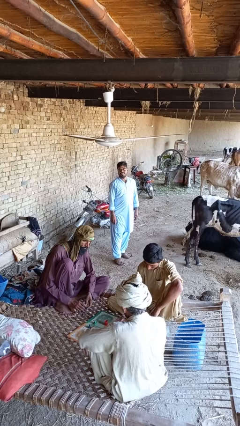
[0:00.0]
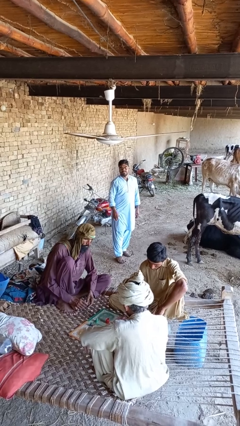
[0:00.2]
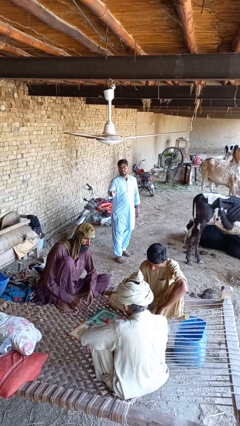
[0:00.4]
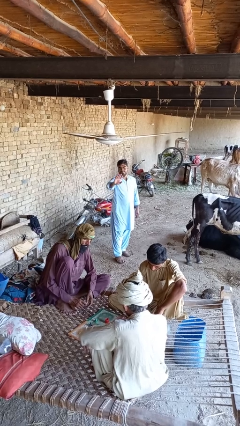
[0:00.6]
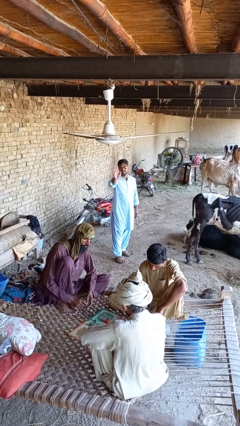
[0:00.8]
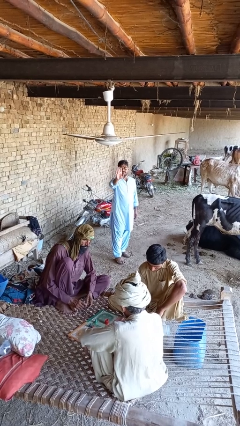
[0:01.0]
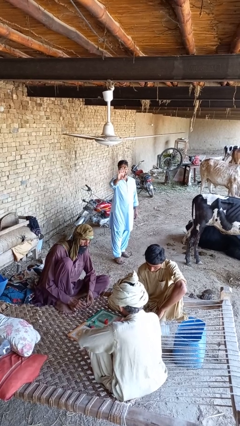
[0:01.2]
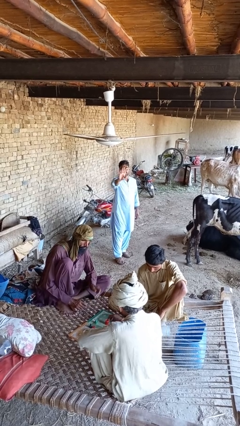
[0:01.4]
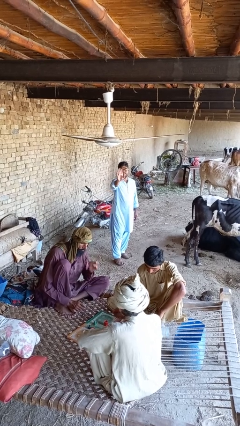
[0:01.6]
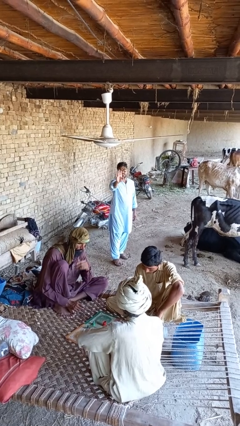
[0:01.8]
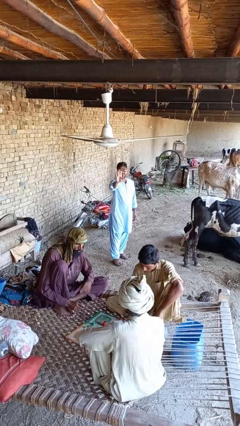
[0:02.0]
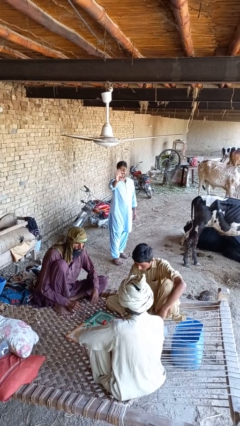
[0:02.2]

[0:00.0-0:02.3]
person waves at person

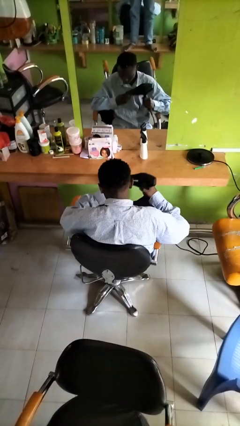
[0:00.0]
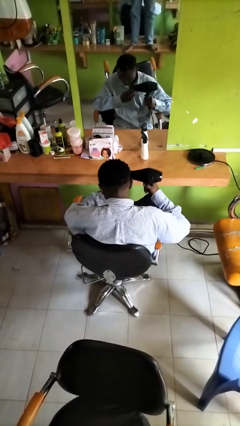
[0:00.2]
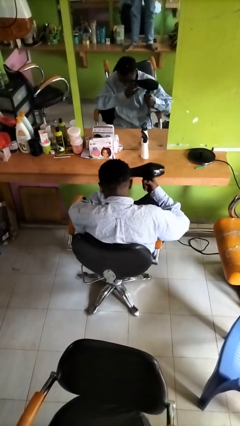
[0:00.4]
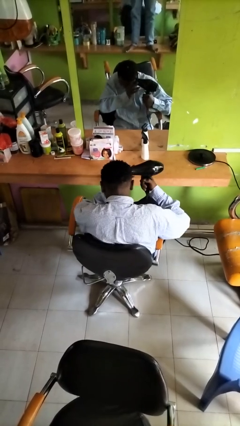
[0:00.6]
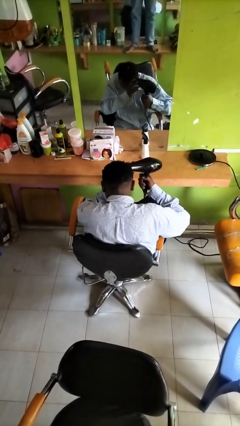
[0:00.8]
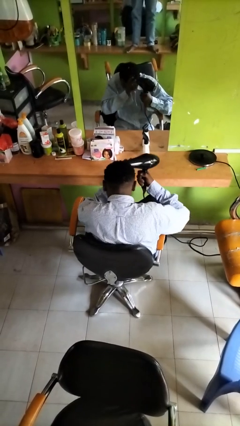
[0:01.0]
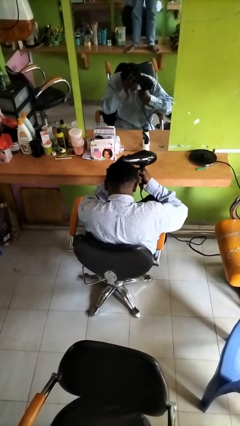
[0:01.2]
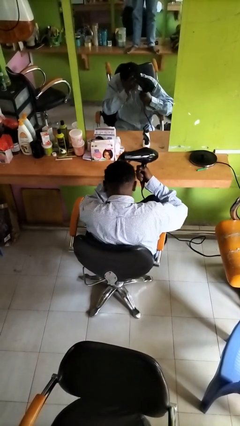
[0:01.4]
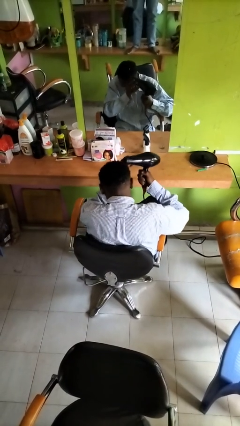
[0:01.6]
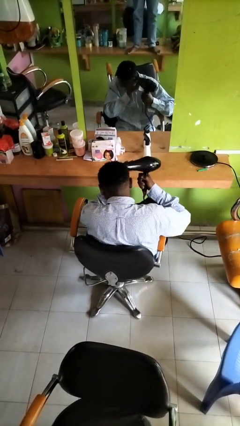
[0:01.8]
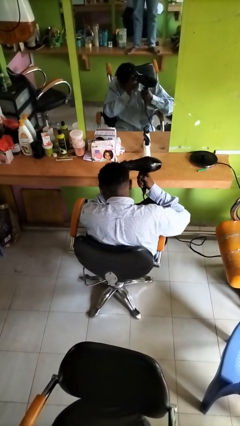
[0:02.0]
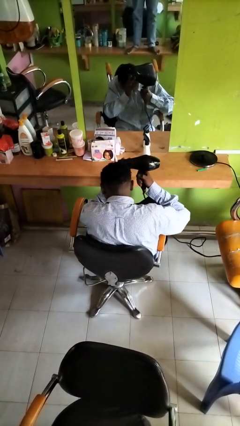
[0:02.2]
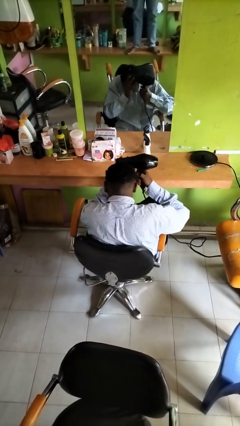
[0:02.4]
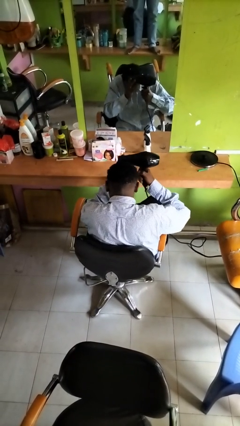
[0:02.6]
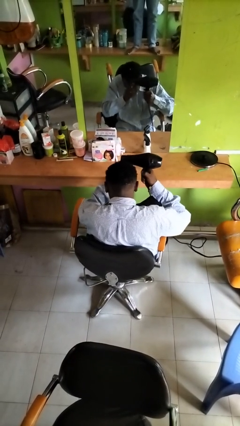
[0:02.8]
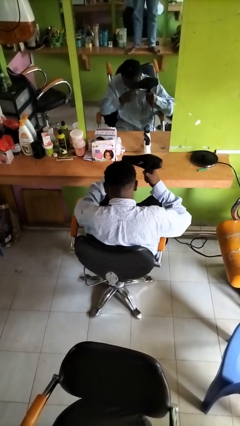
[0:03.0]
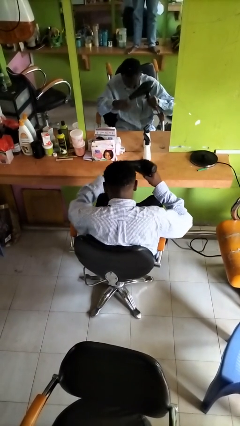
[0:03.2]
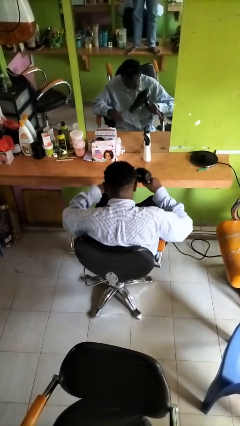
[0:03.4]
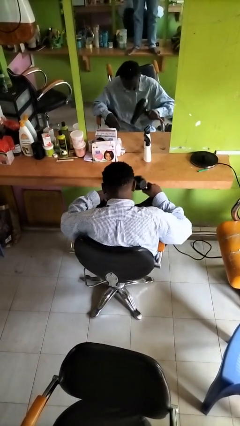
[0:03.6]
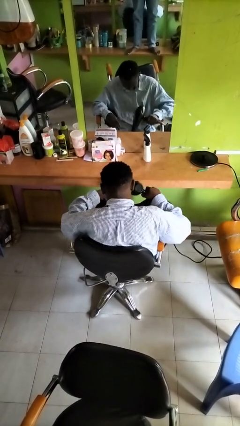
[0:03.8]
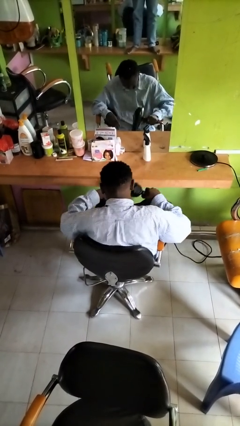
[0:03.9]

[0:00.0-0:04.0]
person dries hair with hairdryer

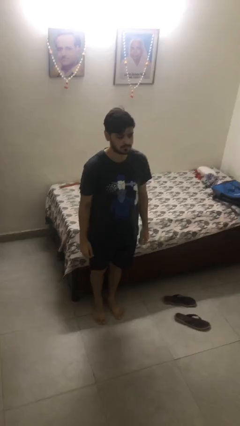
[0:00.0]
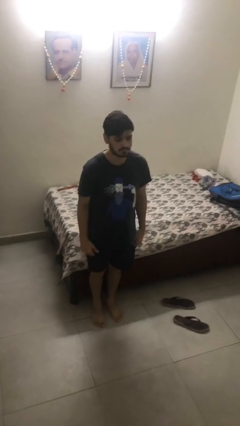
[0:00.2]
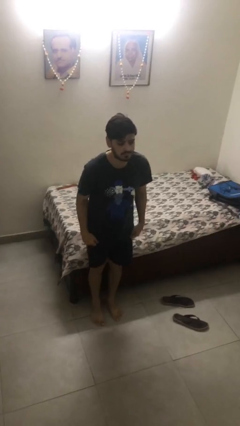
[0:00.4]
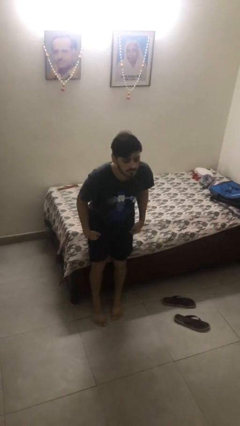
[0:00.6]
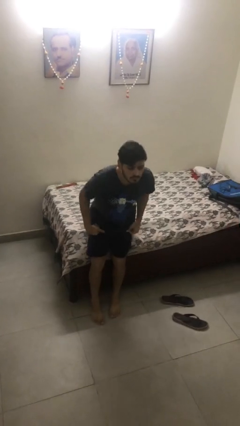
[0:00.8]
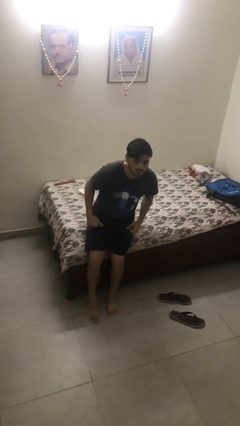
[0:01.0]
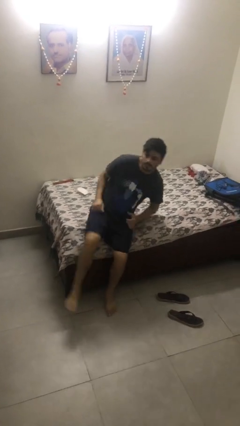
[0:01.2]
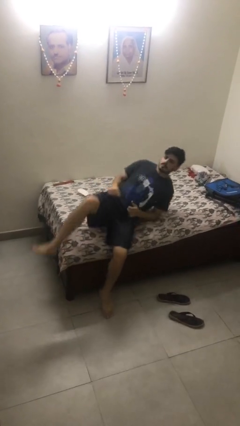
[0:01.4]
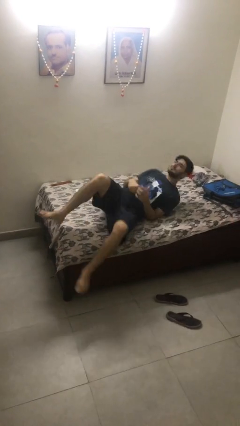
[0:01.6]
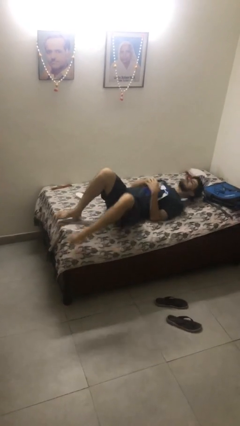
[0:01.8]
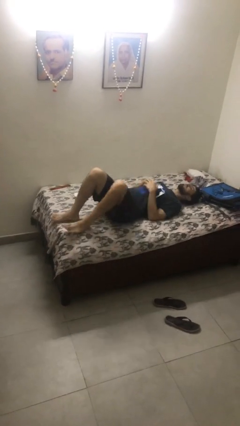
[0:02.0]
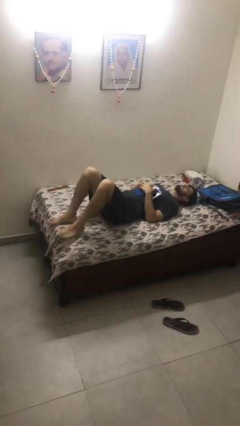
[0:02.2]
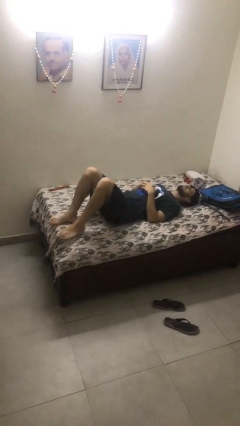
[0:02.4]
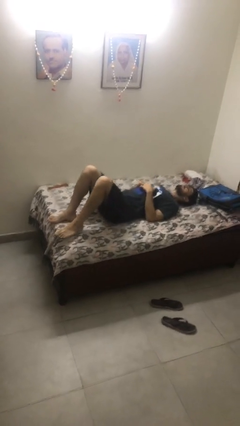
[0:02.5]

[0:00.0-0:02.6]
person lies down on bed

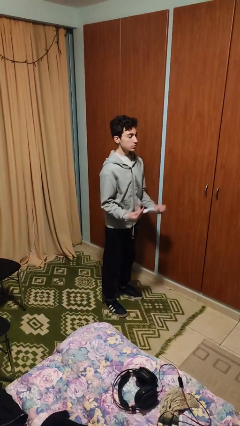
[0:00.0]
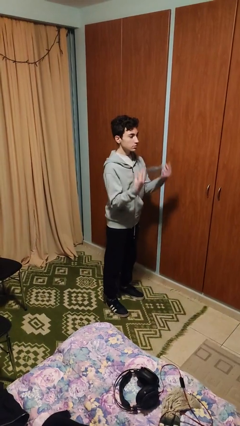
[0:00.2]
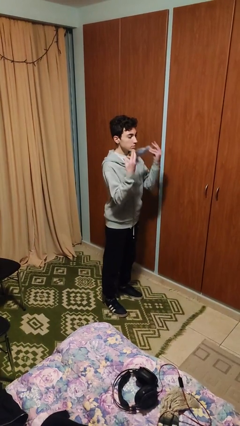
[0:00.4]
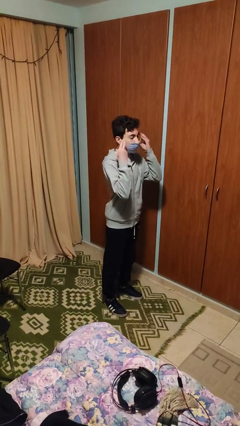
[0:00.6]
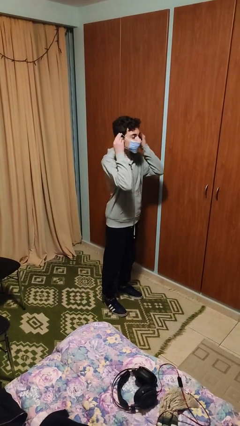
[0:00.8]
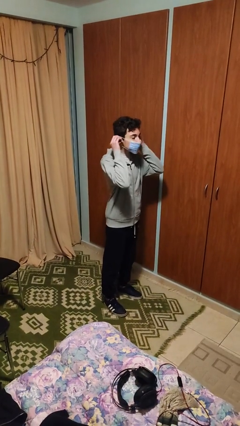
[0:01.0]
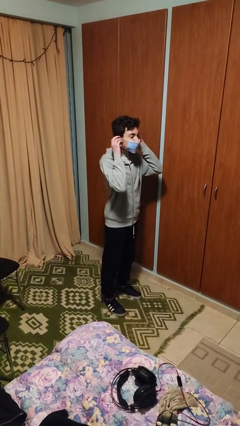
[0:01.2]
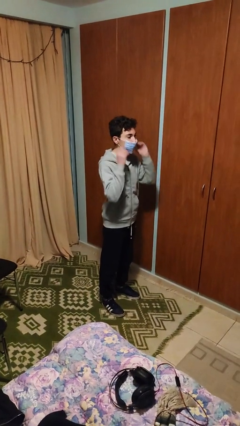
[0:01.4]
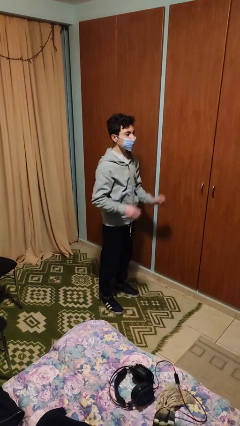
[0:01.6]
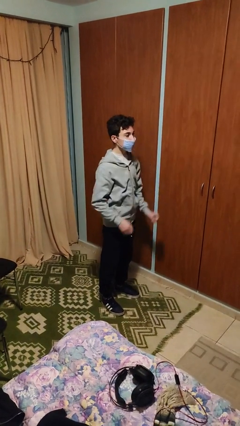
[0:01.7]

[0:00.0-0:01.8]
person puts on facemask

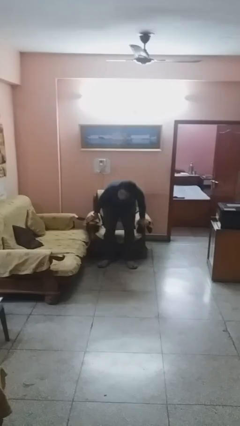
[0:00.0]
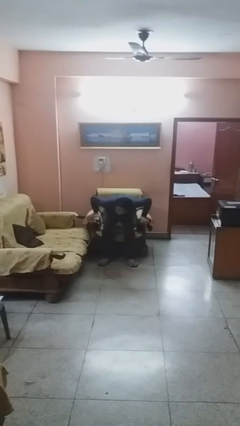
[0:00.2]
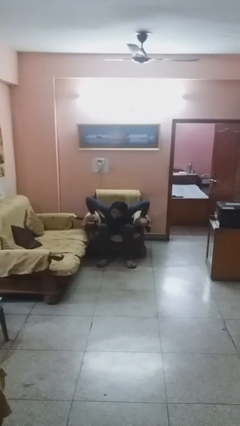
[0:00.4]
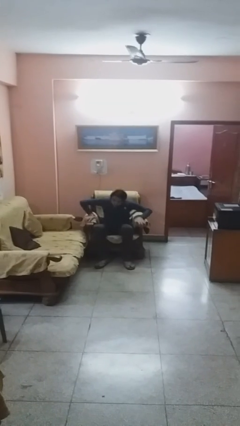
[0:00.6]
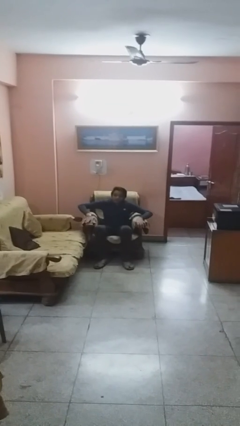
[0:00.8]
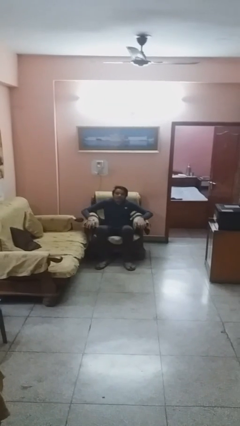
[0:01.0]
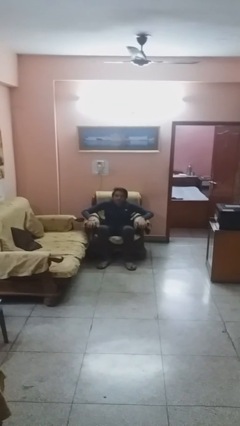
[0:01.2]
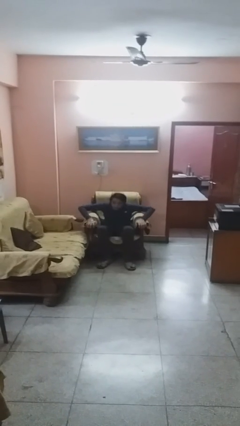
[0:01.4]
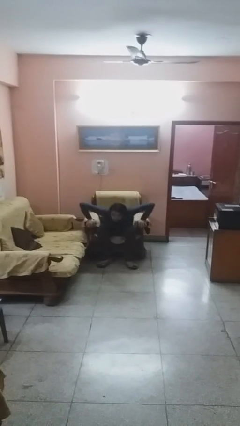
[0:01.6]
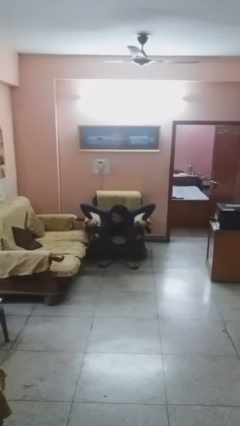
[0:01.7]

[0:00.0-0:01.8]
person sits down

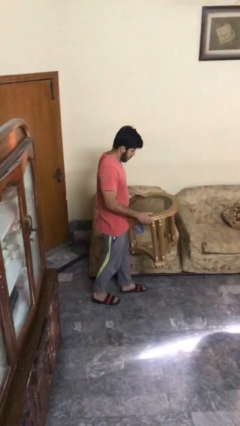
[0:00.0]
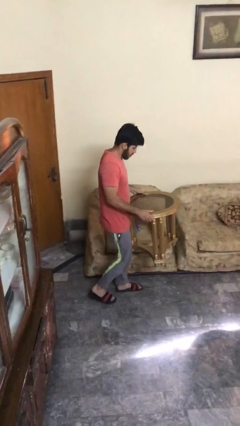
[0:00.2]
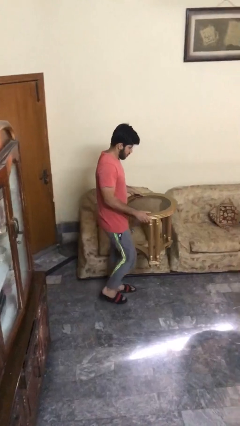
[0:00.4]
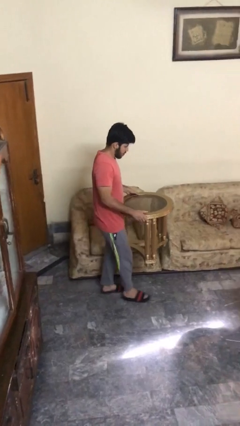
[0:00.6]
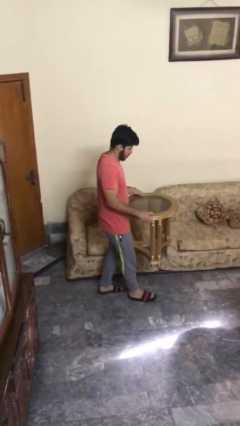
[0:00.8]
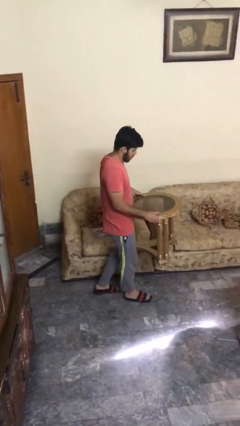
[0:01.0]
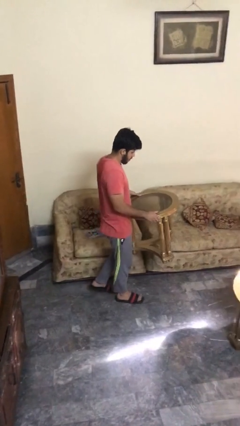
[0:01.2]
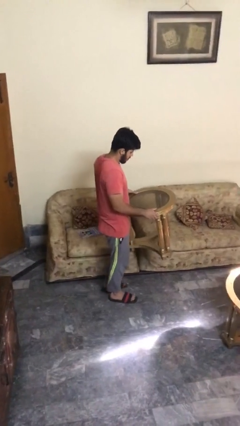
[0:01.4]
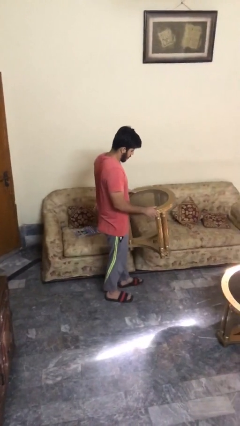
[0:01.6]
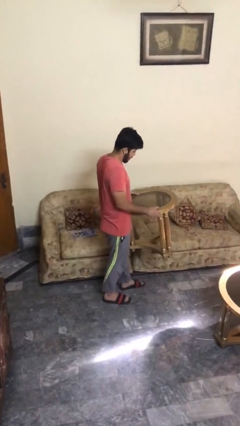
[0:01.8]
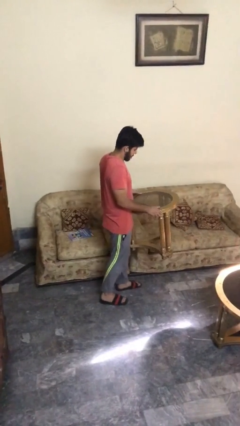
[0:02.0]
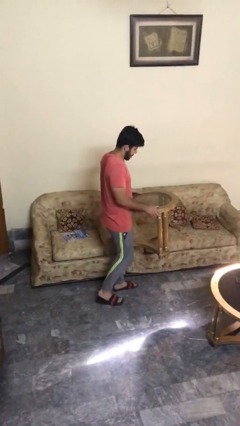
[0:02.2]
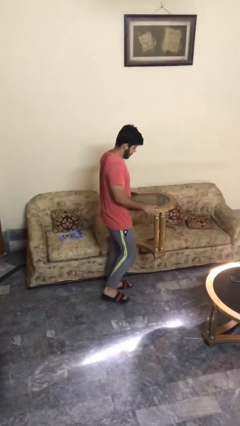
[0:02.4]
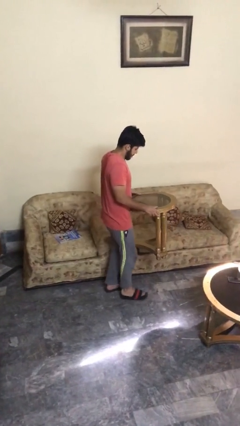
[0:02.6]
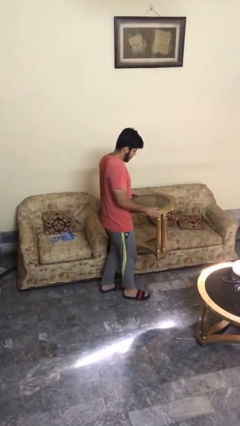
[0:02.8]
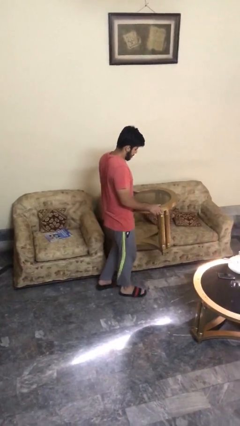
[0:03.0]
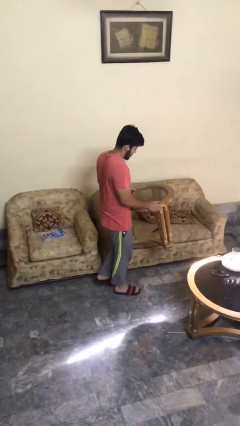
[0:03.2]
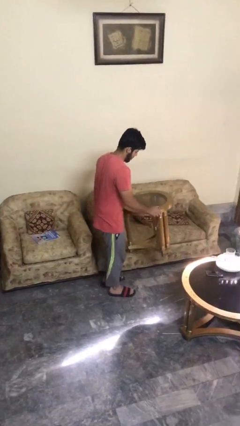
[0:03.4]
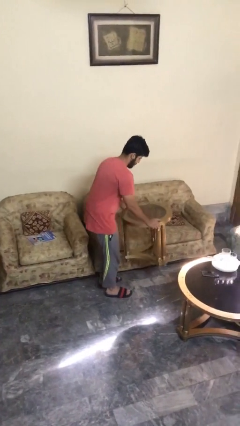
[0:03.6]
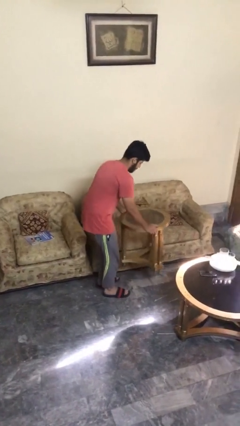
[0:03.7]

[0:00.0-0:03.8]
person carries heavy object

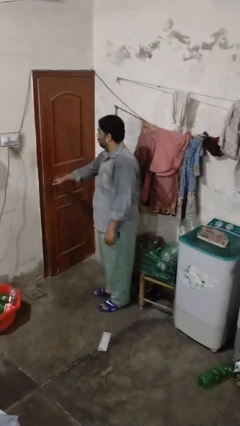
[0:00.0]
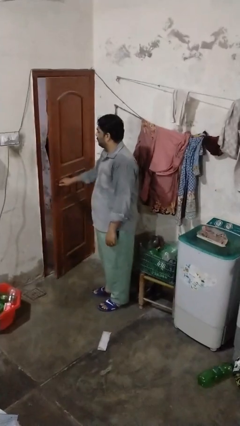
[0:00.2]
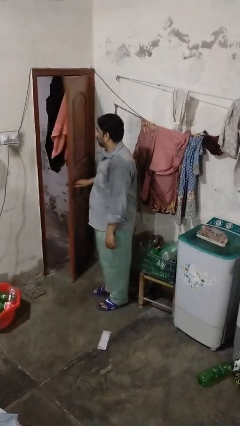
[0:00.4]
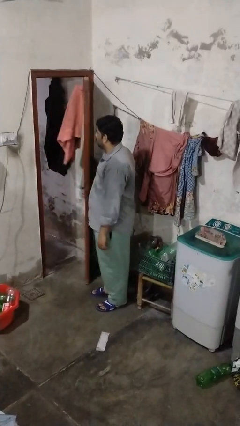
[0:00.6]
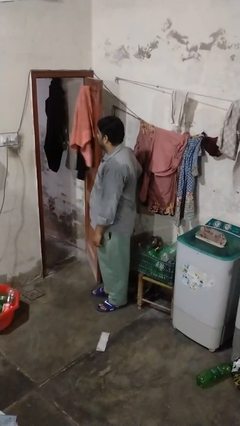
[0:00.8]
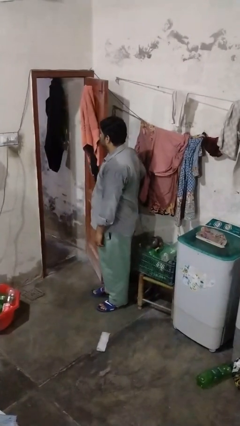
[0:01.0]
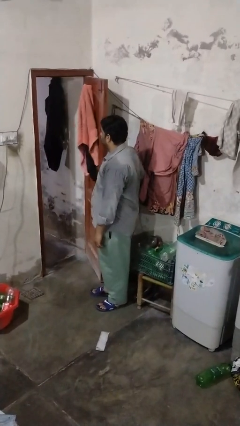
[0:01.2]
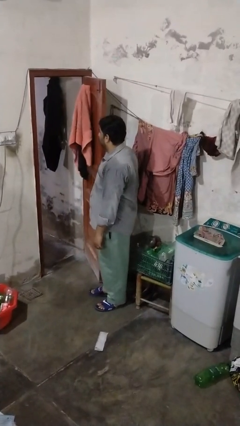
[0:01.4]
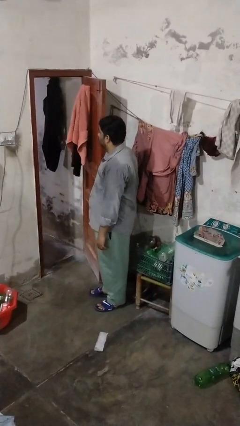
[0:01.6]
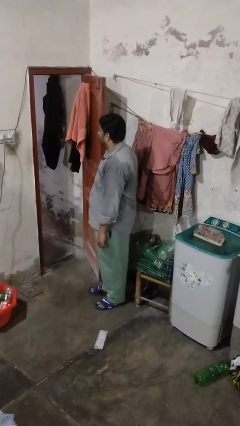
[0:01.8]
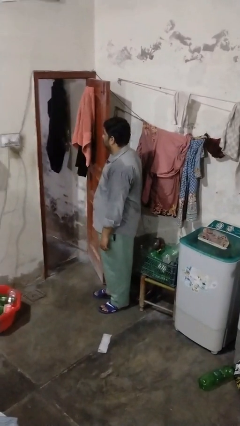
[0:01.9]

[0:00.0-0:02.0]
person opens closet door
